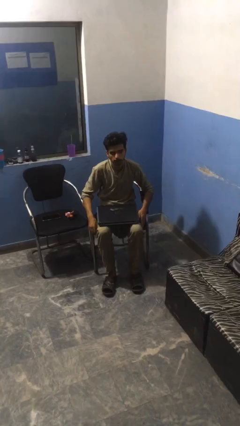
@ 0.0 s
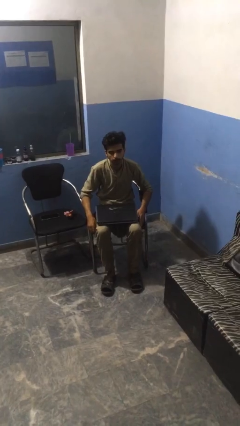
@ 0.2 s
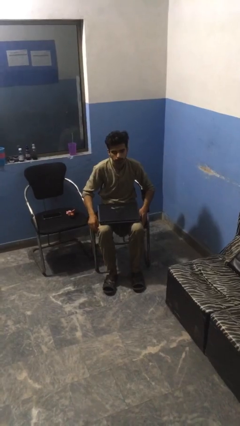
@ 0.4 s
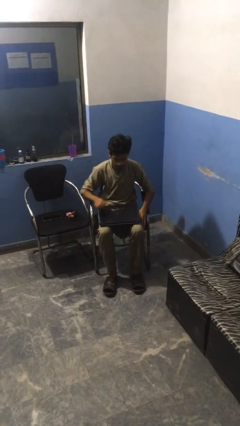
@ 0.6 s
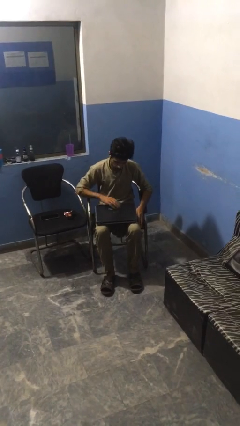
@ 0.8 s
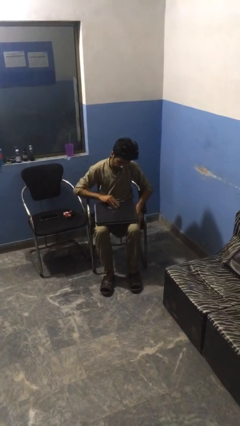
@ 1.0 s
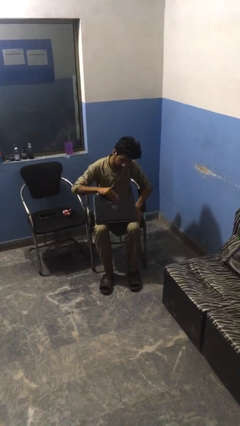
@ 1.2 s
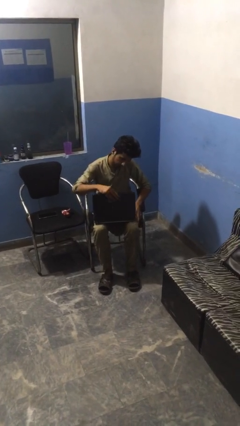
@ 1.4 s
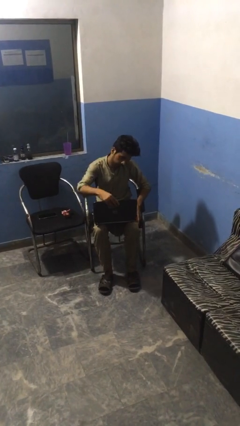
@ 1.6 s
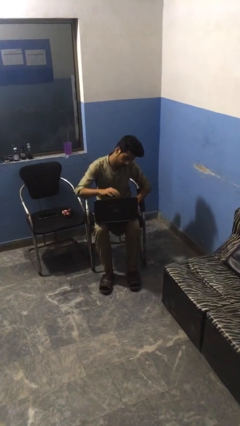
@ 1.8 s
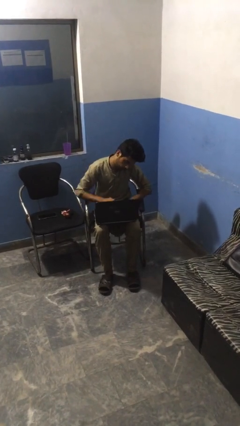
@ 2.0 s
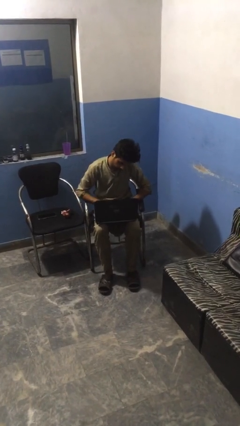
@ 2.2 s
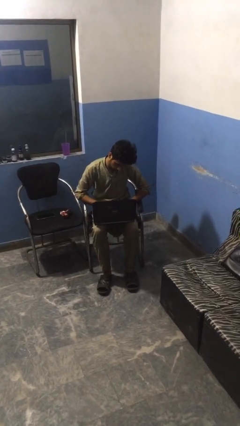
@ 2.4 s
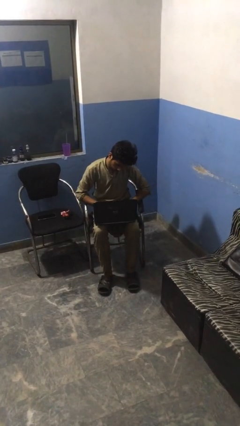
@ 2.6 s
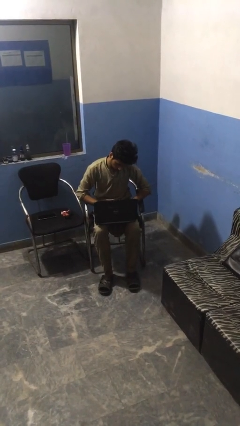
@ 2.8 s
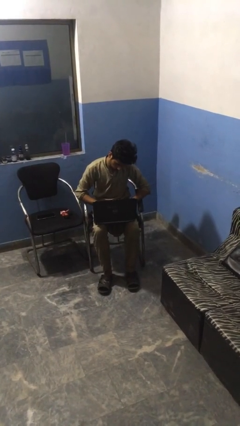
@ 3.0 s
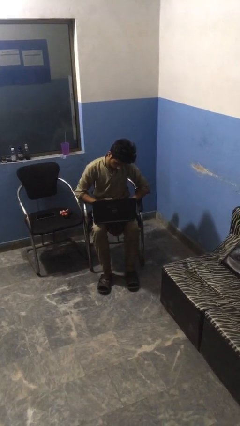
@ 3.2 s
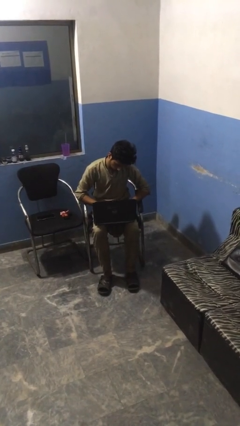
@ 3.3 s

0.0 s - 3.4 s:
person opens laptop

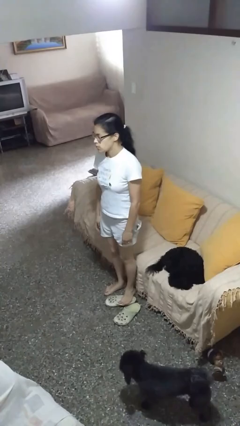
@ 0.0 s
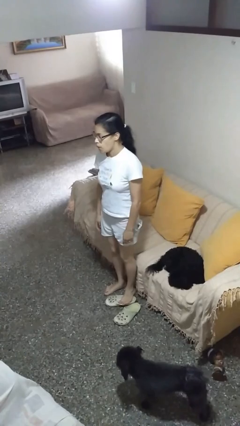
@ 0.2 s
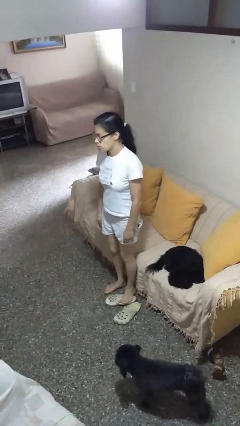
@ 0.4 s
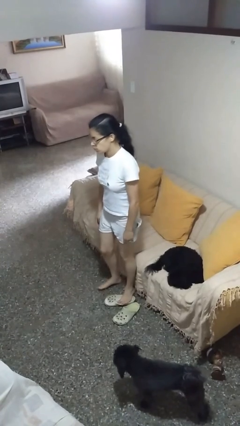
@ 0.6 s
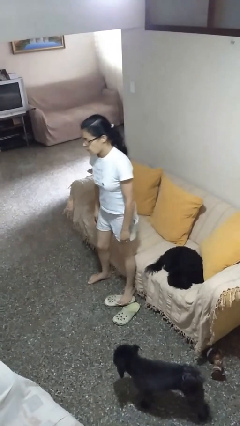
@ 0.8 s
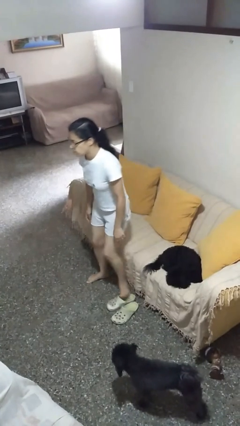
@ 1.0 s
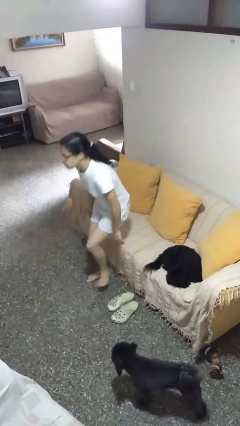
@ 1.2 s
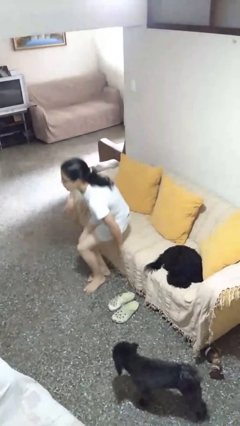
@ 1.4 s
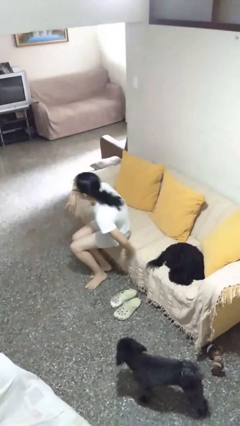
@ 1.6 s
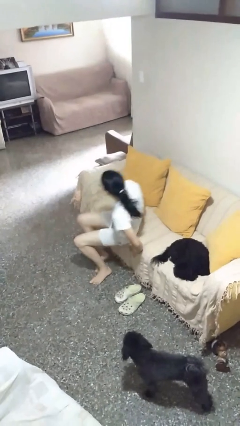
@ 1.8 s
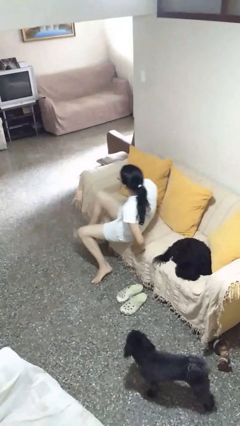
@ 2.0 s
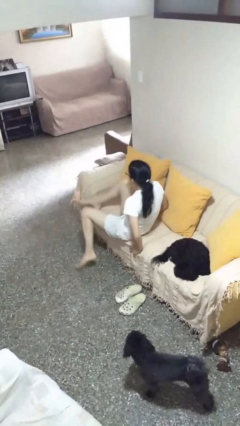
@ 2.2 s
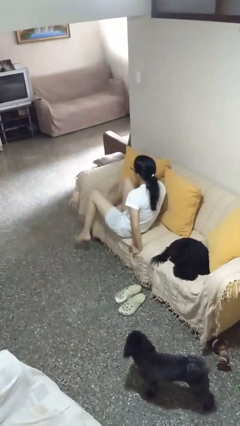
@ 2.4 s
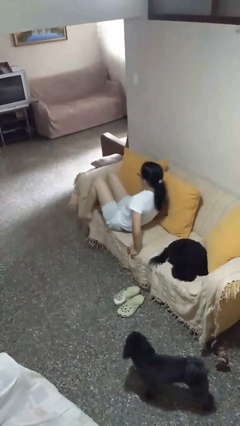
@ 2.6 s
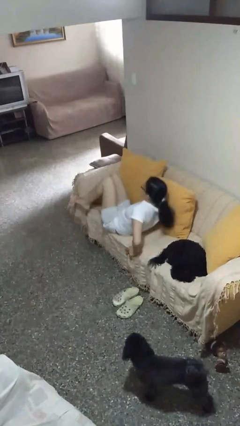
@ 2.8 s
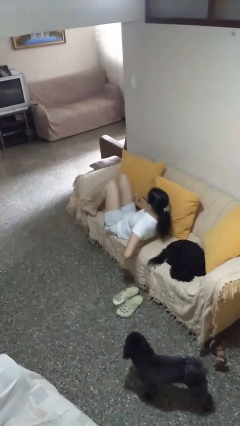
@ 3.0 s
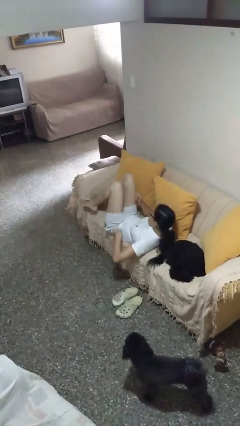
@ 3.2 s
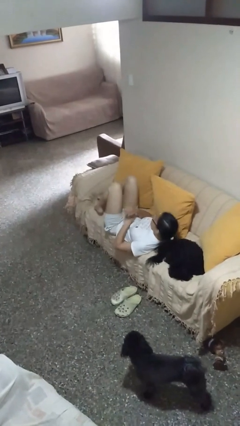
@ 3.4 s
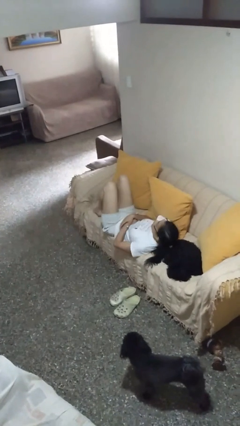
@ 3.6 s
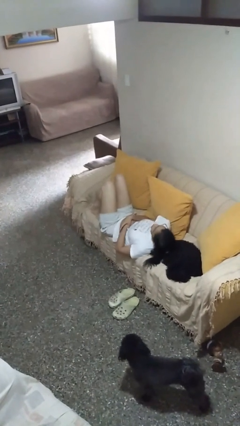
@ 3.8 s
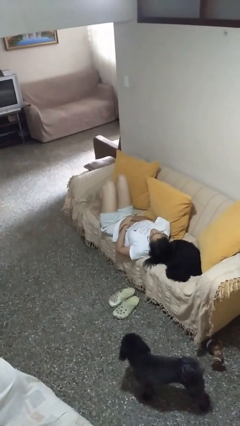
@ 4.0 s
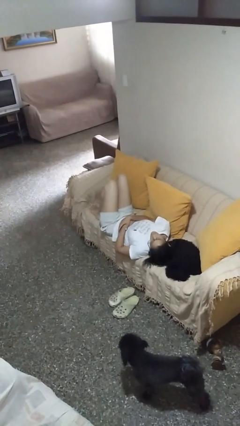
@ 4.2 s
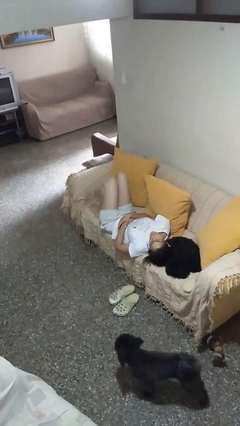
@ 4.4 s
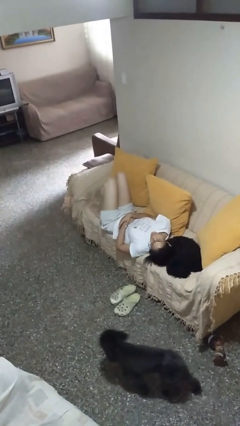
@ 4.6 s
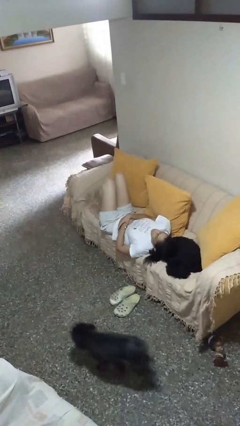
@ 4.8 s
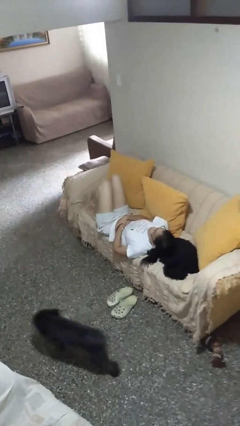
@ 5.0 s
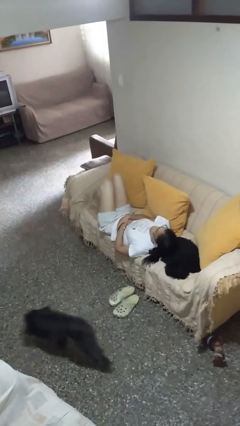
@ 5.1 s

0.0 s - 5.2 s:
person lies down on couch

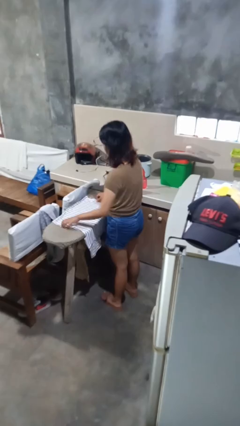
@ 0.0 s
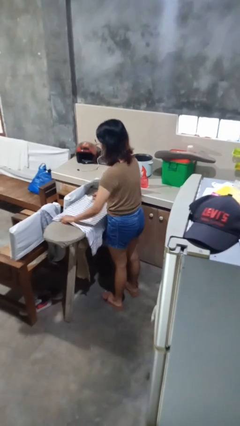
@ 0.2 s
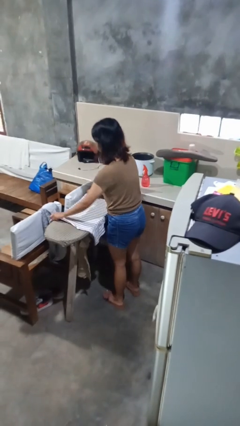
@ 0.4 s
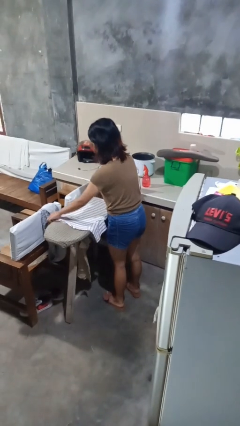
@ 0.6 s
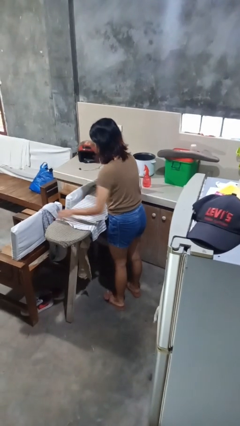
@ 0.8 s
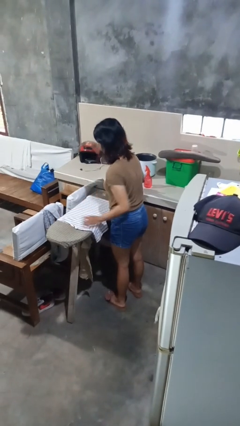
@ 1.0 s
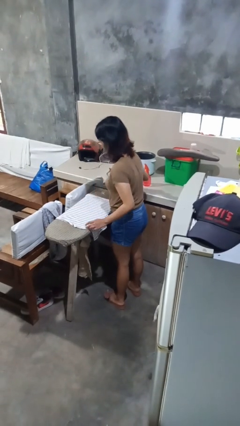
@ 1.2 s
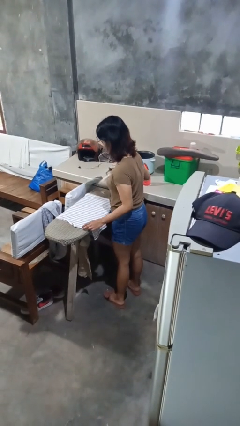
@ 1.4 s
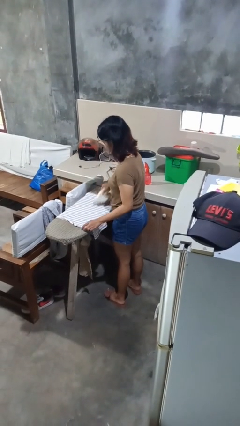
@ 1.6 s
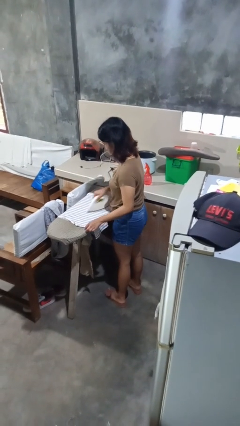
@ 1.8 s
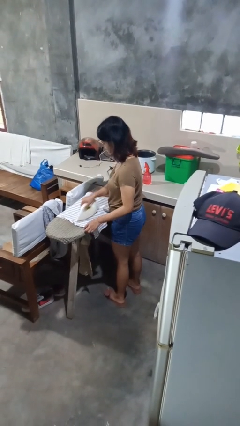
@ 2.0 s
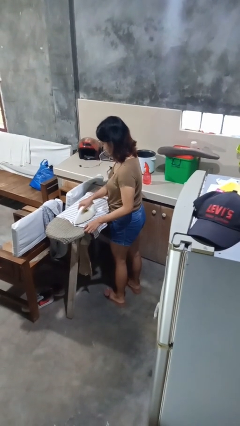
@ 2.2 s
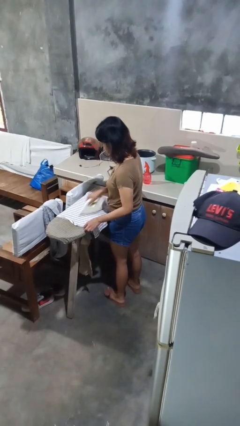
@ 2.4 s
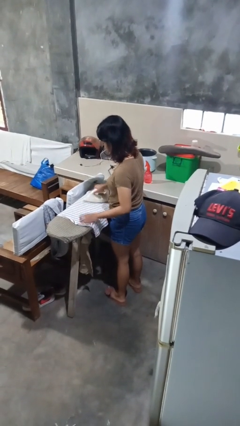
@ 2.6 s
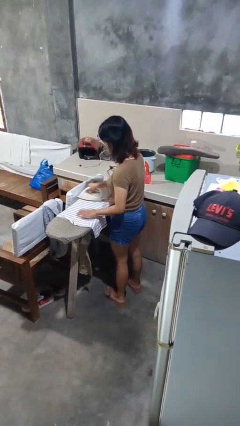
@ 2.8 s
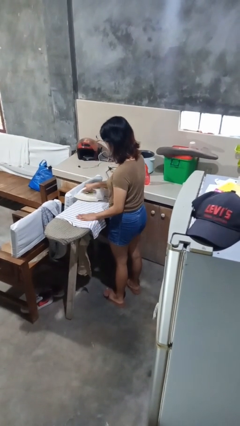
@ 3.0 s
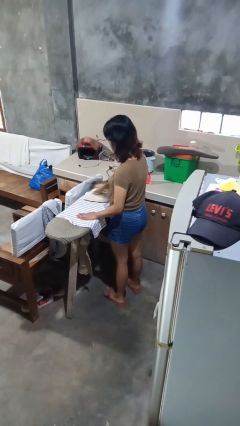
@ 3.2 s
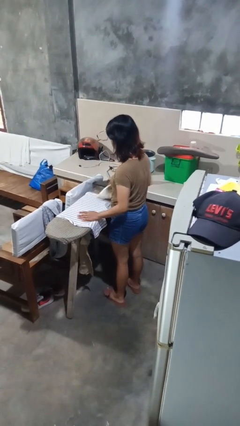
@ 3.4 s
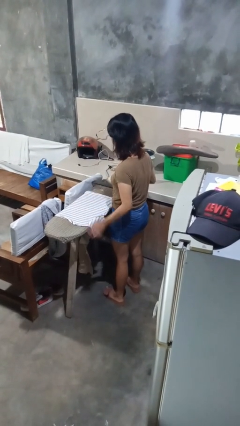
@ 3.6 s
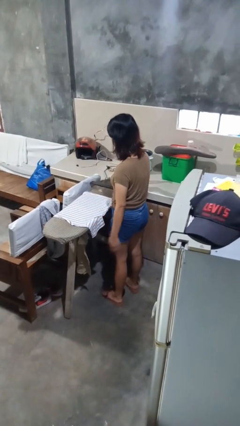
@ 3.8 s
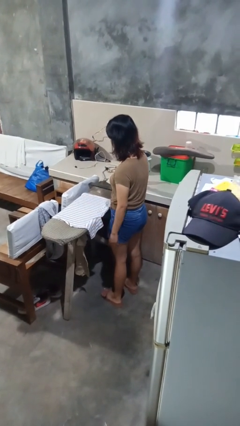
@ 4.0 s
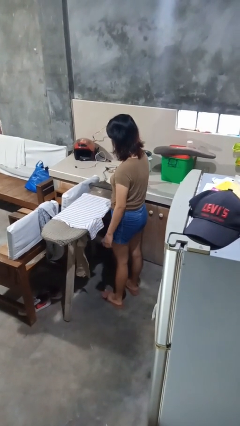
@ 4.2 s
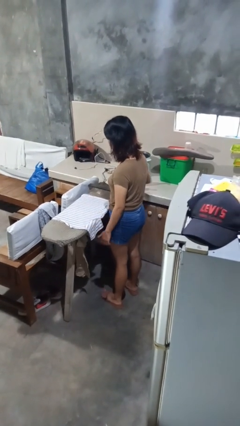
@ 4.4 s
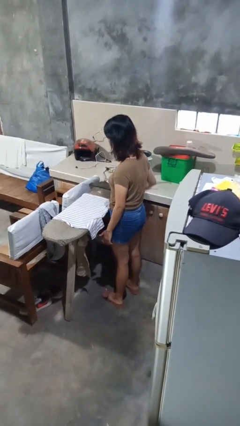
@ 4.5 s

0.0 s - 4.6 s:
person irons clothes

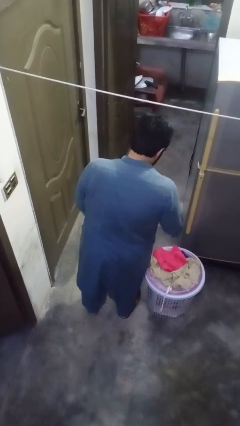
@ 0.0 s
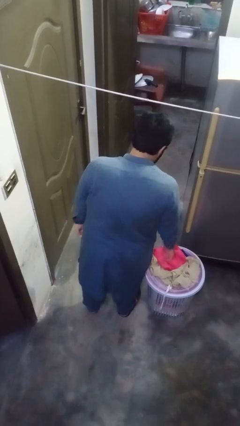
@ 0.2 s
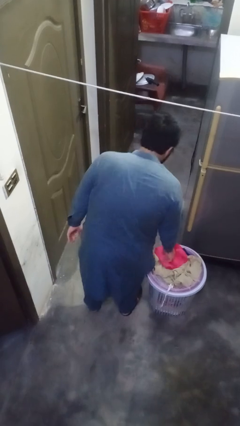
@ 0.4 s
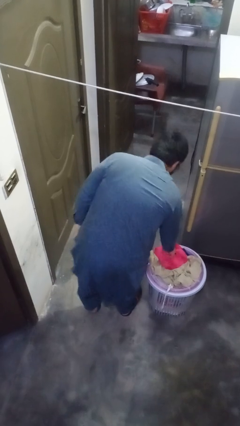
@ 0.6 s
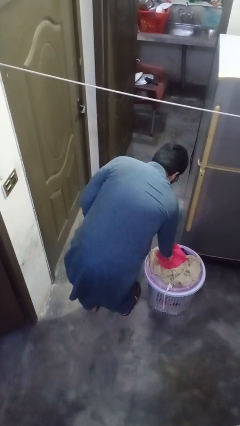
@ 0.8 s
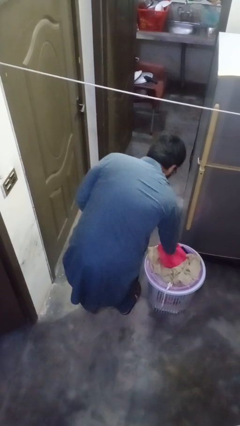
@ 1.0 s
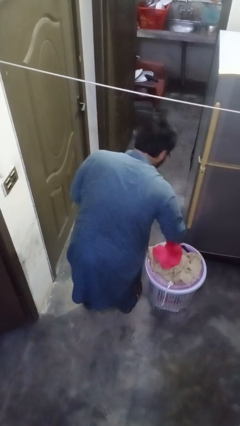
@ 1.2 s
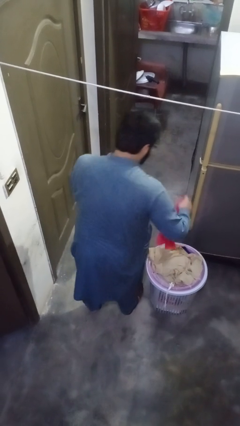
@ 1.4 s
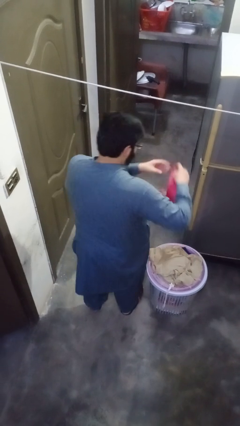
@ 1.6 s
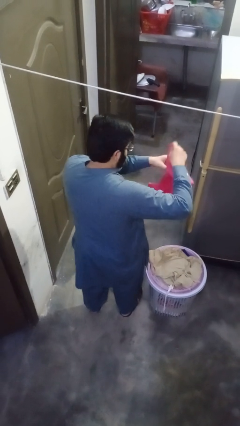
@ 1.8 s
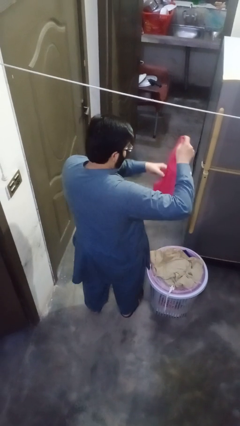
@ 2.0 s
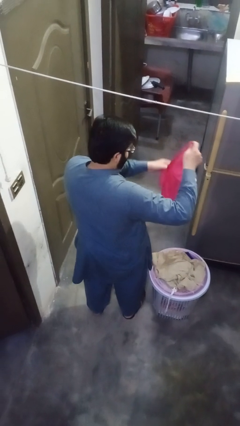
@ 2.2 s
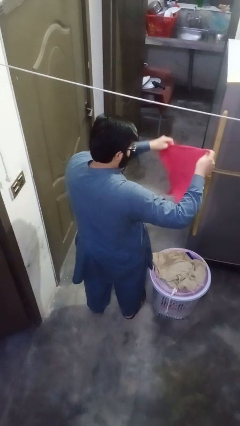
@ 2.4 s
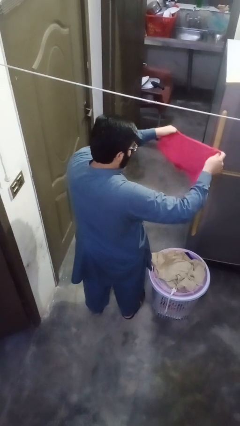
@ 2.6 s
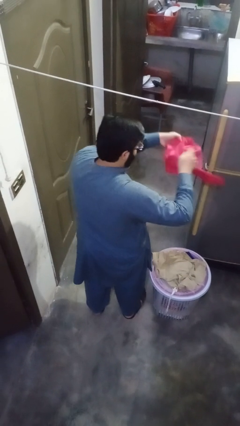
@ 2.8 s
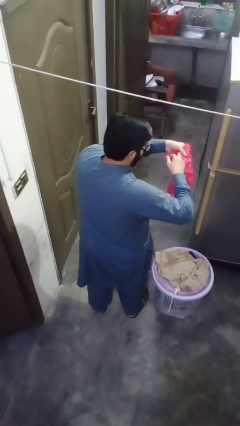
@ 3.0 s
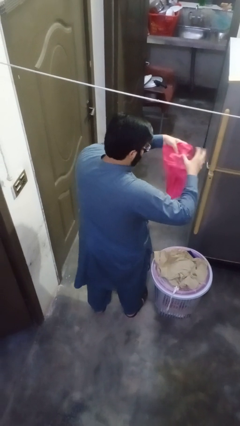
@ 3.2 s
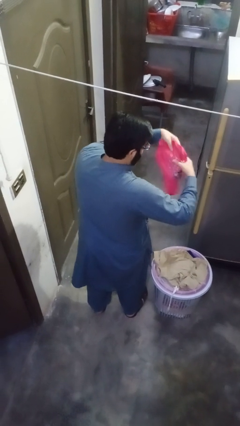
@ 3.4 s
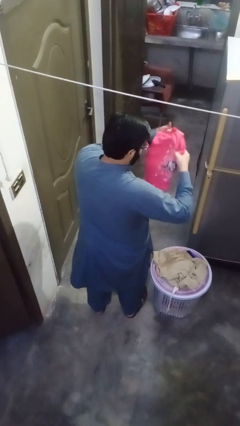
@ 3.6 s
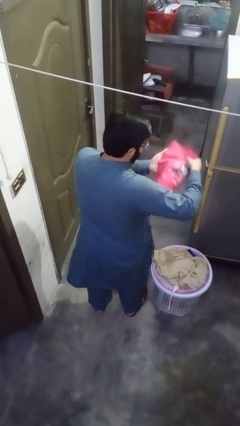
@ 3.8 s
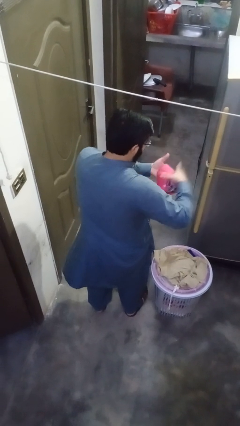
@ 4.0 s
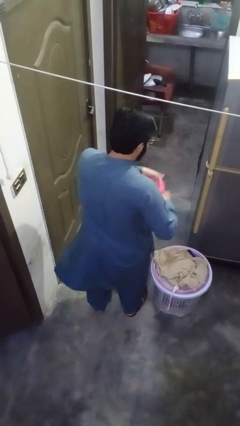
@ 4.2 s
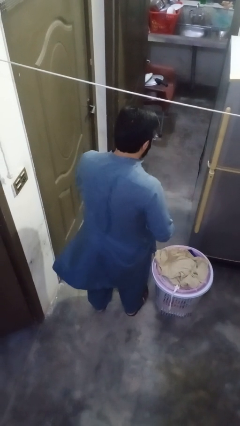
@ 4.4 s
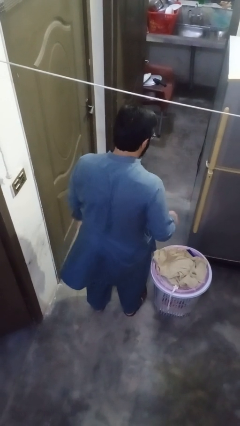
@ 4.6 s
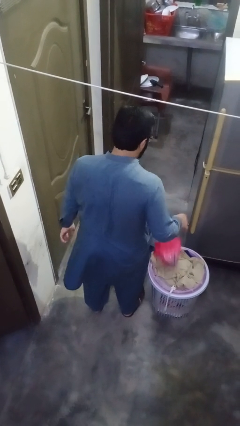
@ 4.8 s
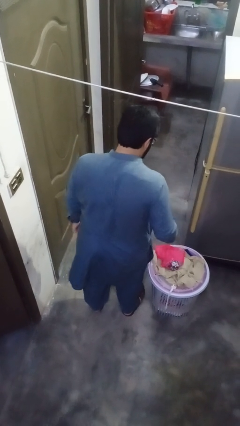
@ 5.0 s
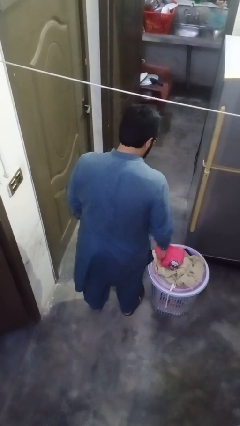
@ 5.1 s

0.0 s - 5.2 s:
person folds shirt
